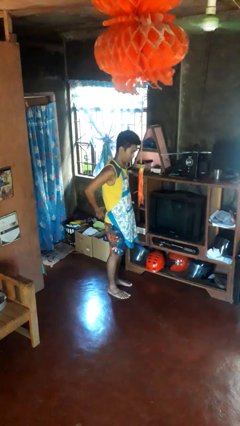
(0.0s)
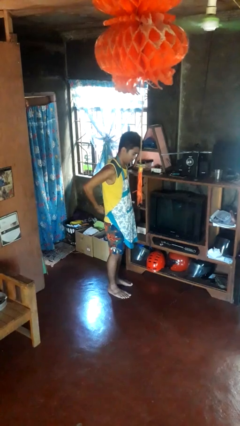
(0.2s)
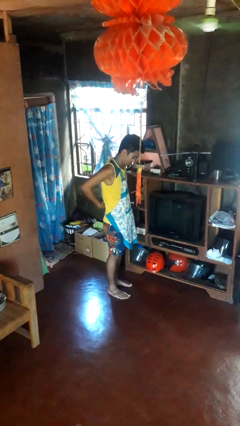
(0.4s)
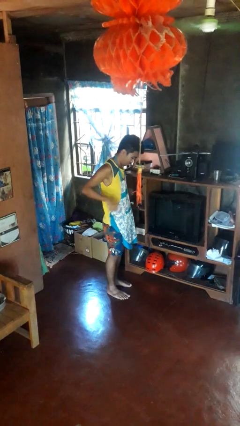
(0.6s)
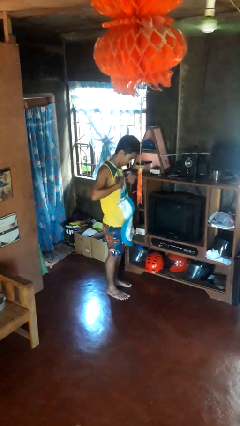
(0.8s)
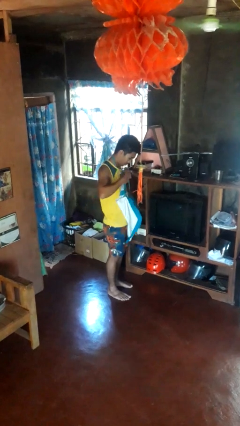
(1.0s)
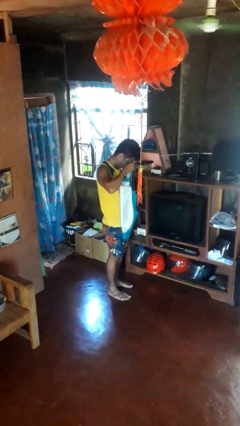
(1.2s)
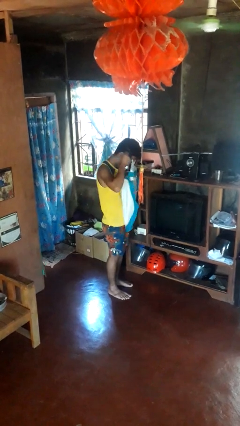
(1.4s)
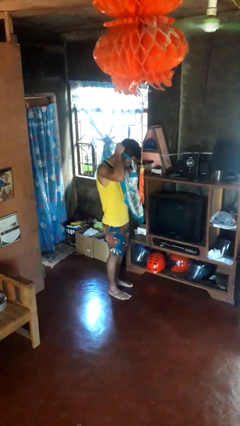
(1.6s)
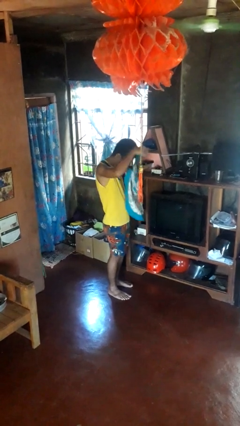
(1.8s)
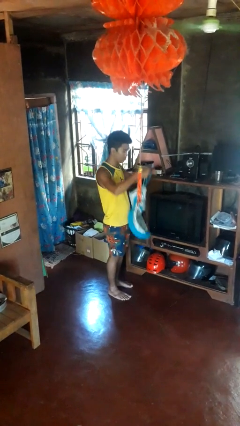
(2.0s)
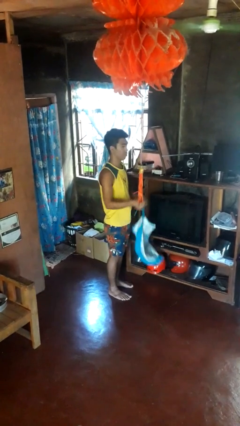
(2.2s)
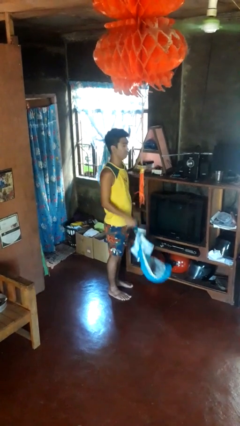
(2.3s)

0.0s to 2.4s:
person takes off apron

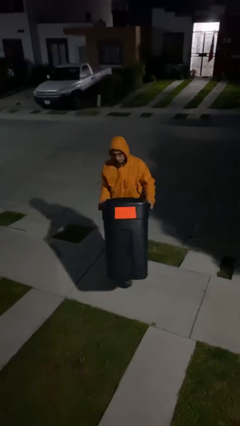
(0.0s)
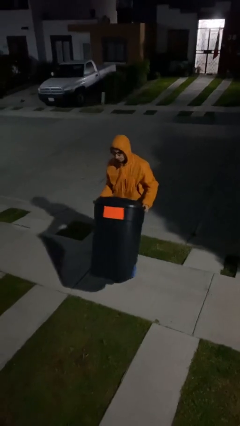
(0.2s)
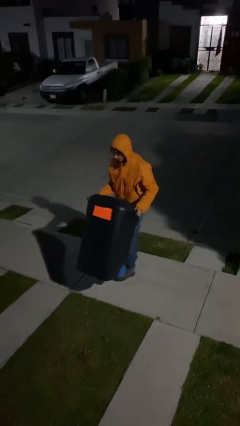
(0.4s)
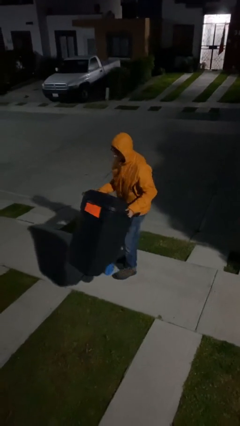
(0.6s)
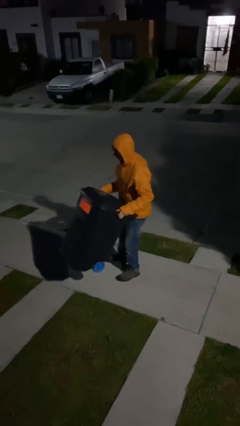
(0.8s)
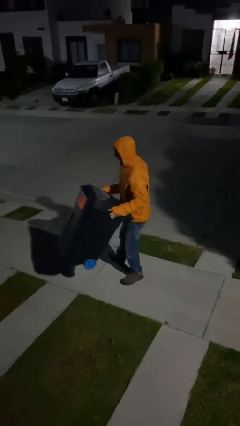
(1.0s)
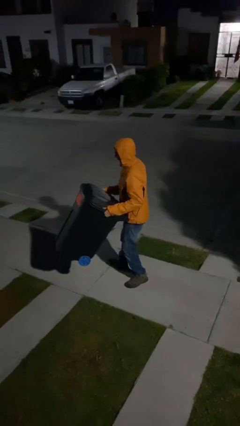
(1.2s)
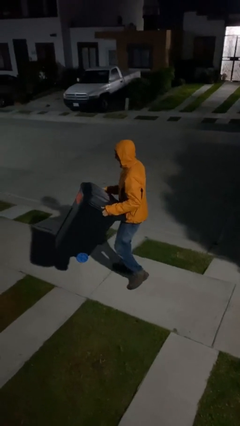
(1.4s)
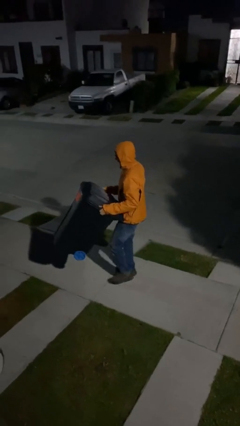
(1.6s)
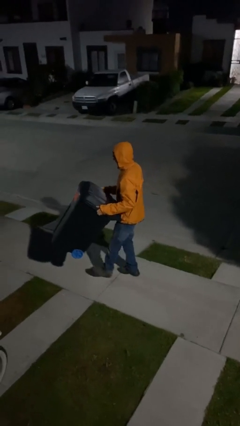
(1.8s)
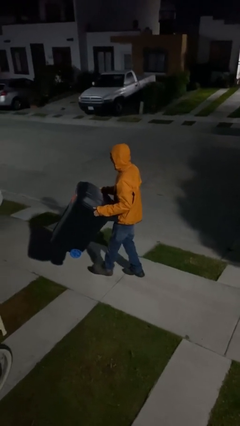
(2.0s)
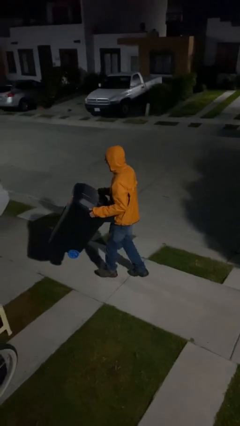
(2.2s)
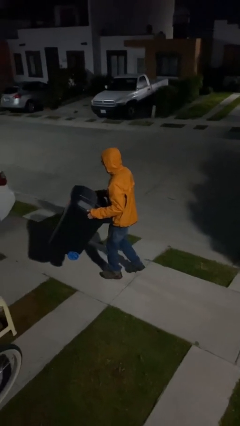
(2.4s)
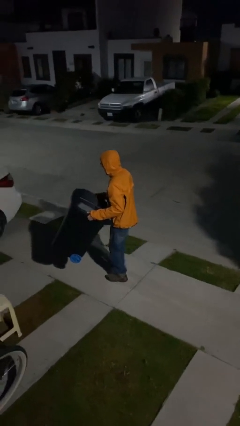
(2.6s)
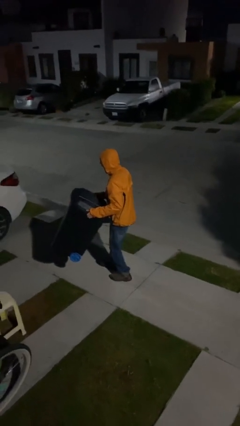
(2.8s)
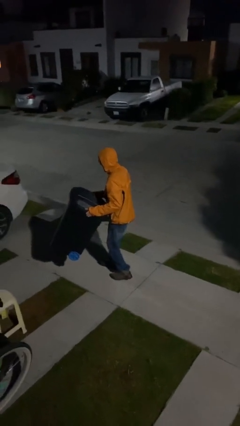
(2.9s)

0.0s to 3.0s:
person carries heavy object

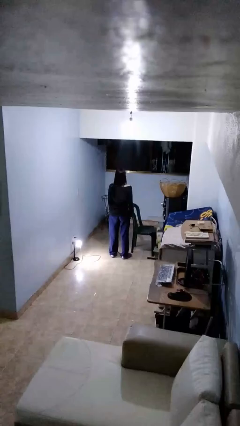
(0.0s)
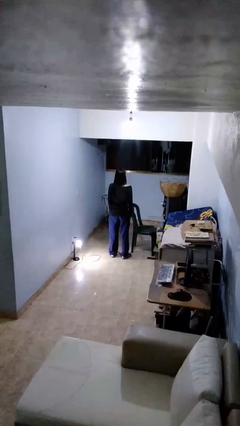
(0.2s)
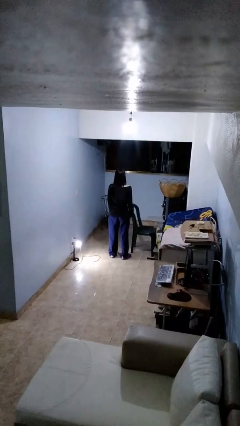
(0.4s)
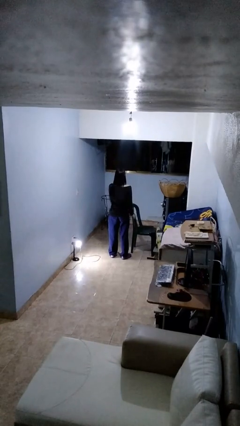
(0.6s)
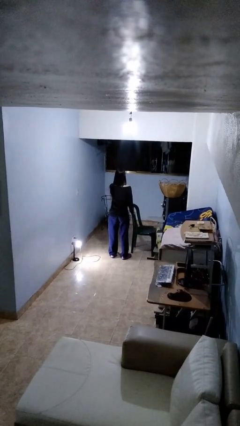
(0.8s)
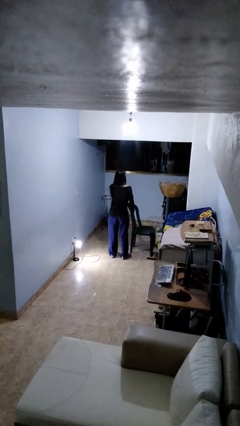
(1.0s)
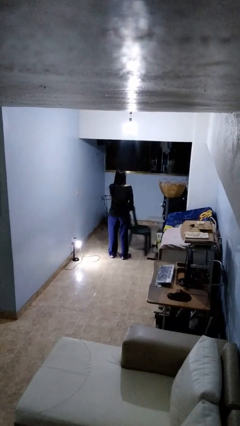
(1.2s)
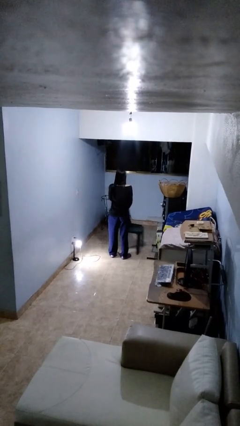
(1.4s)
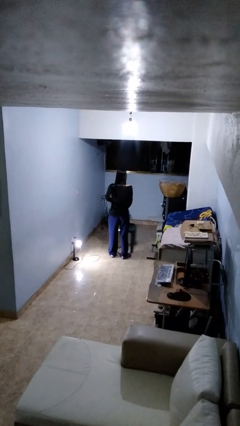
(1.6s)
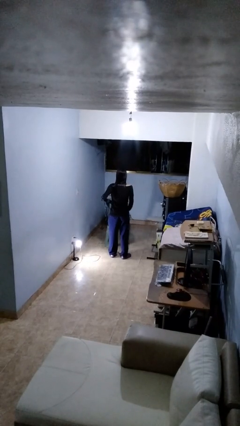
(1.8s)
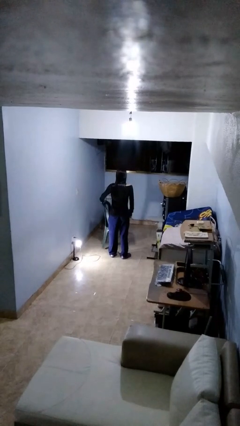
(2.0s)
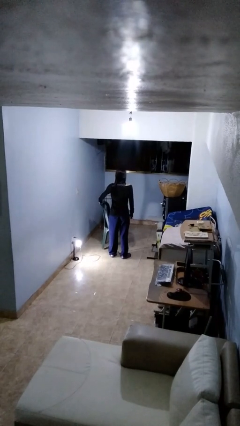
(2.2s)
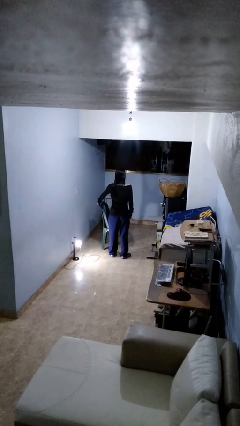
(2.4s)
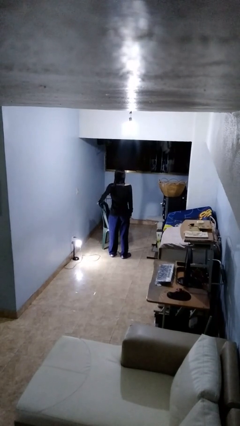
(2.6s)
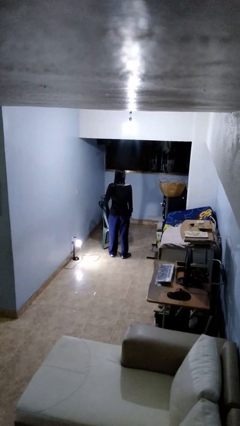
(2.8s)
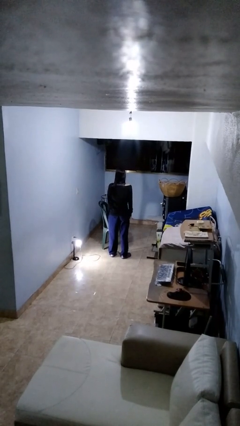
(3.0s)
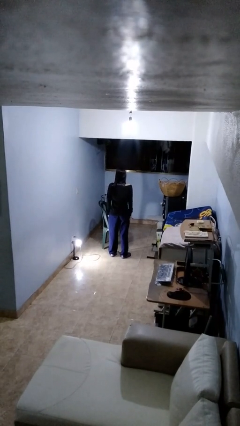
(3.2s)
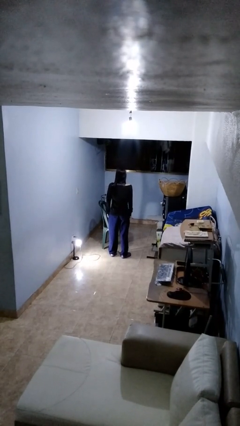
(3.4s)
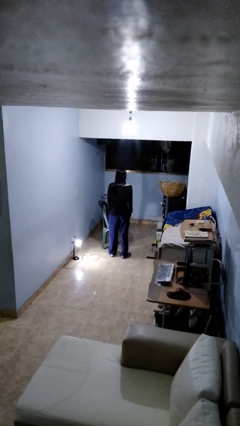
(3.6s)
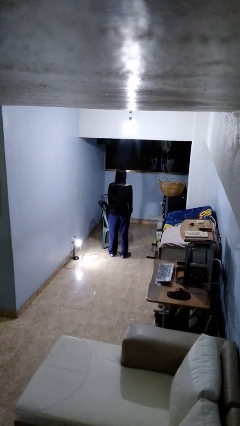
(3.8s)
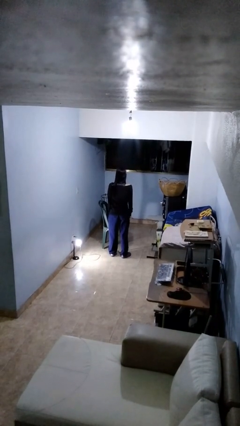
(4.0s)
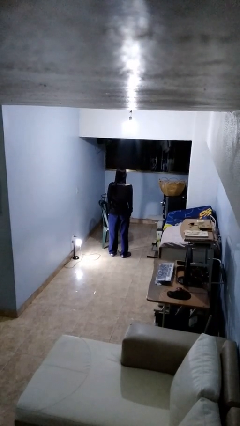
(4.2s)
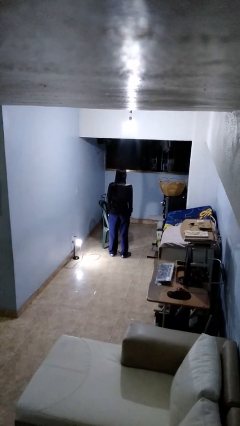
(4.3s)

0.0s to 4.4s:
person pulls out chair

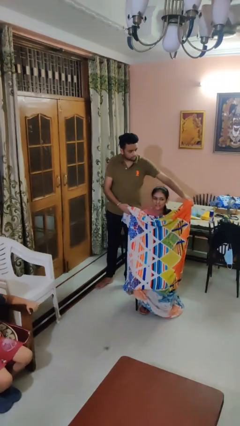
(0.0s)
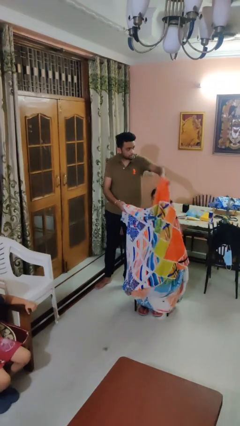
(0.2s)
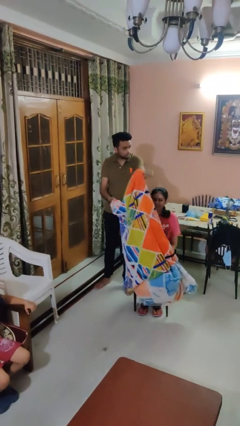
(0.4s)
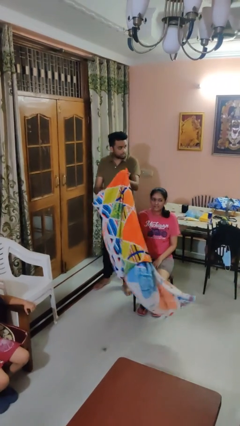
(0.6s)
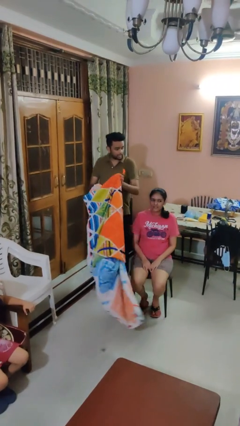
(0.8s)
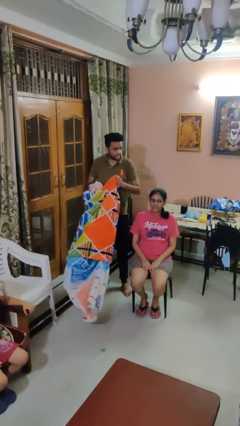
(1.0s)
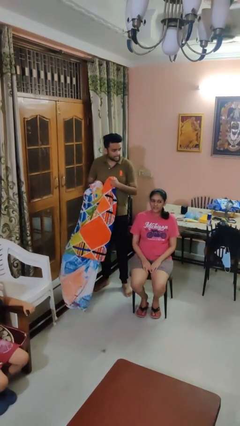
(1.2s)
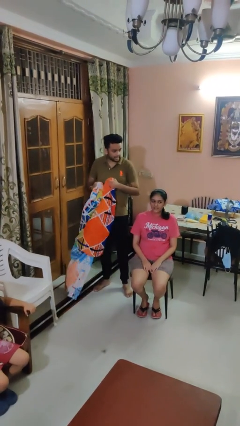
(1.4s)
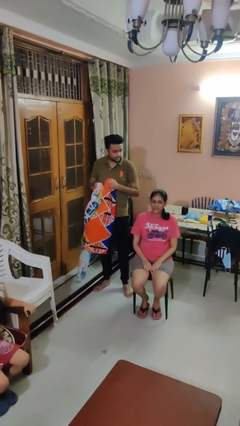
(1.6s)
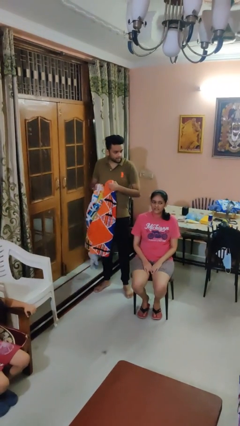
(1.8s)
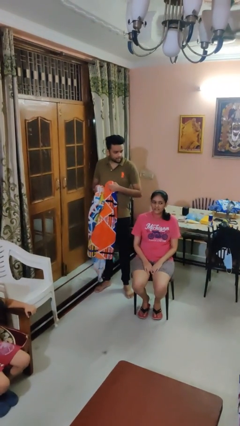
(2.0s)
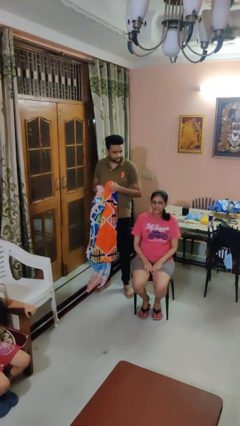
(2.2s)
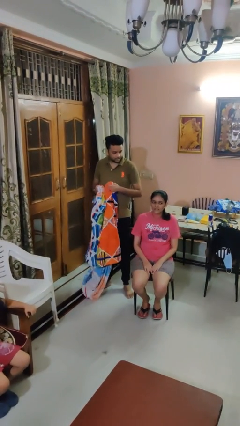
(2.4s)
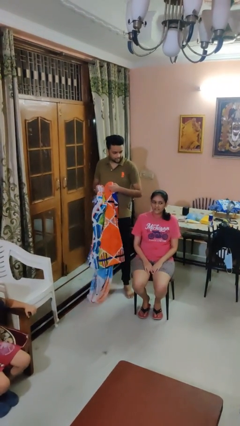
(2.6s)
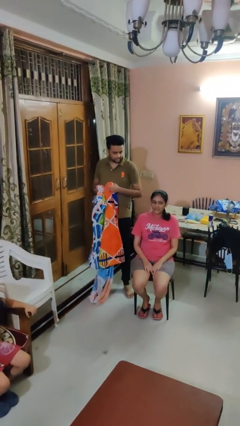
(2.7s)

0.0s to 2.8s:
person uncovers friend with blanket

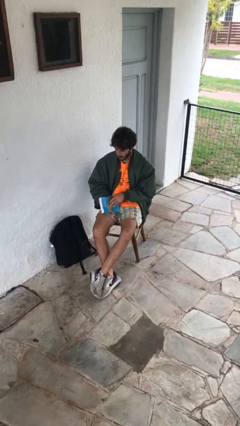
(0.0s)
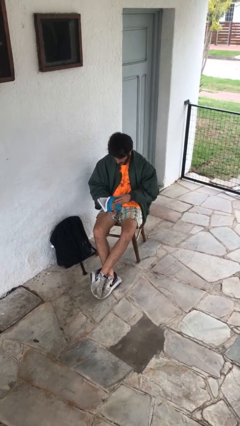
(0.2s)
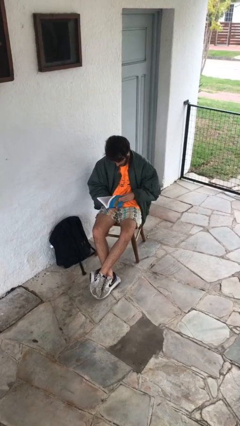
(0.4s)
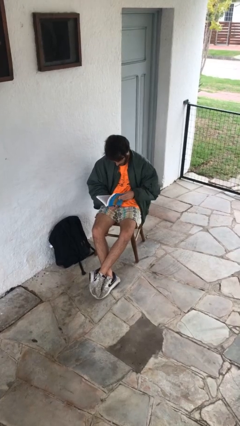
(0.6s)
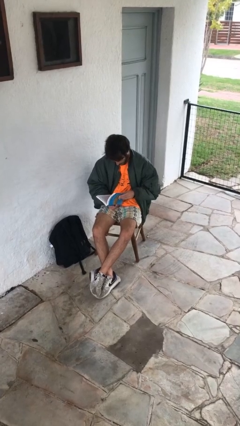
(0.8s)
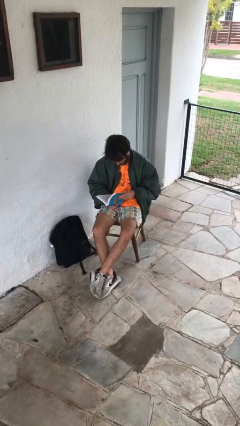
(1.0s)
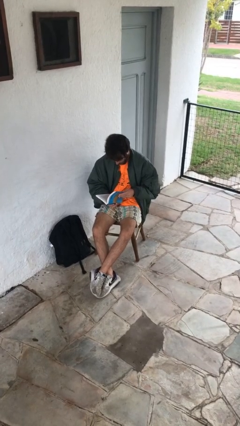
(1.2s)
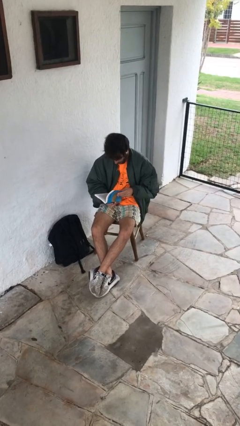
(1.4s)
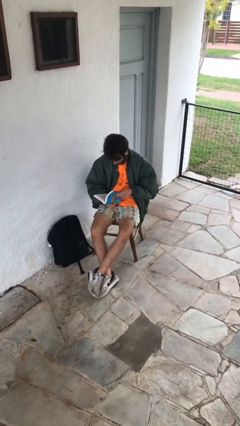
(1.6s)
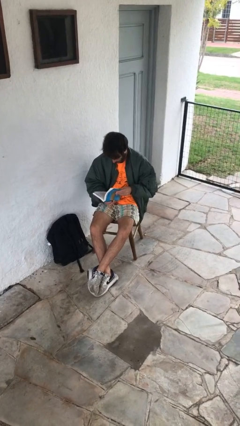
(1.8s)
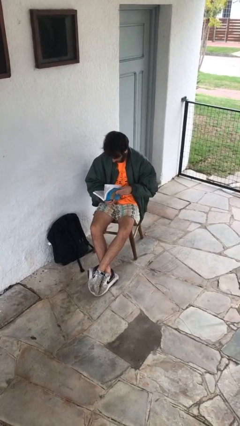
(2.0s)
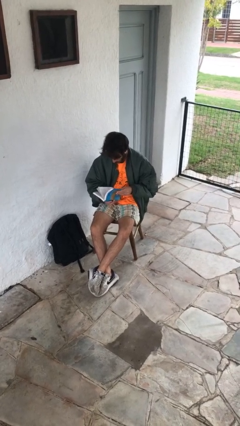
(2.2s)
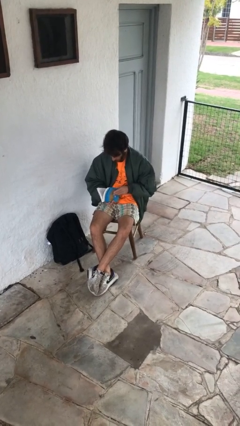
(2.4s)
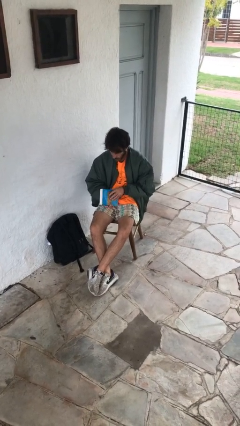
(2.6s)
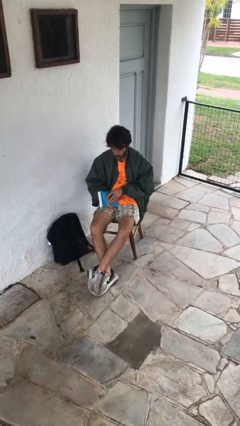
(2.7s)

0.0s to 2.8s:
person reads document

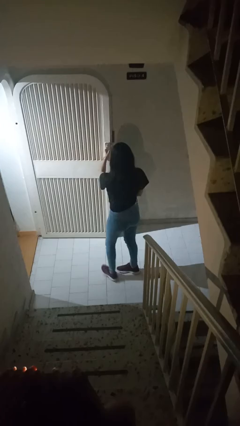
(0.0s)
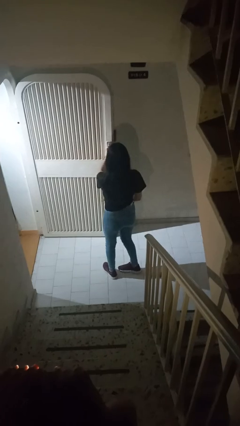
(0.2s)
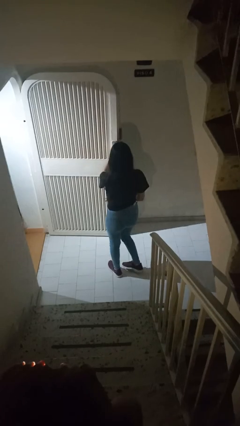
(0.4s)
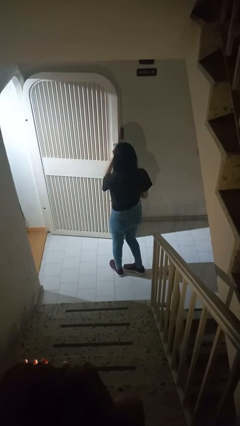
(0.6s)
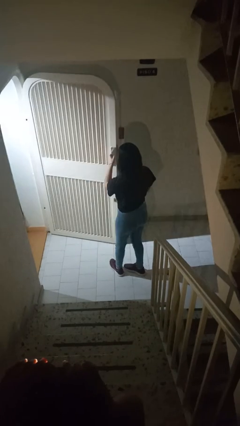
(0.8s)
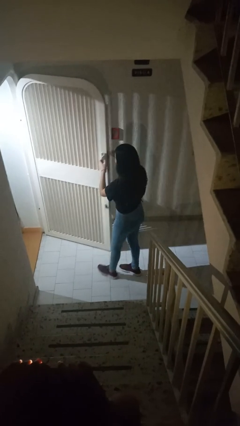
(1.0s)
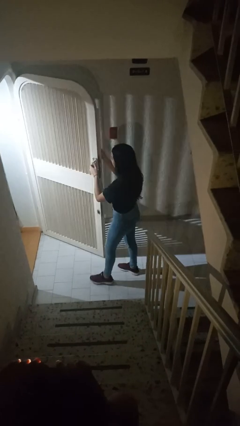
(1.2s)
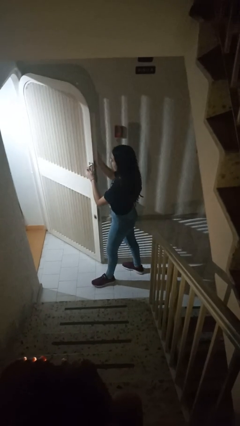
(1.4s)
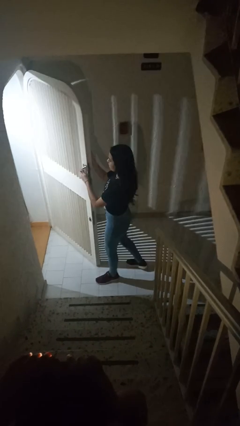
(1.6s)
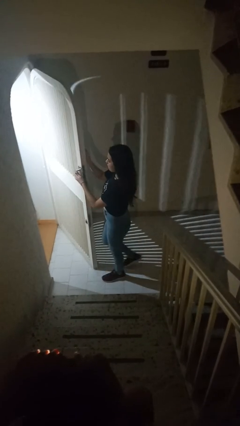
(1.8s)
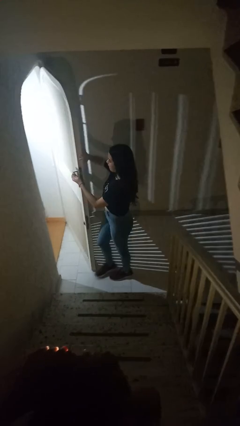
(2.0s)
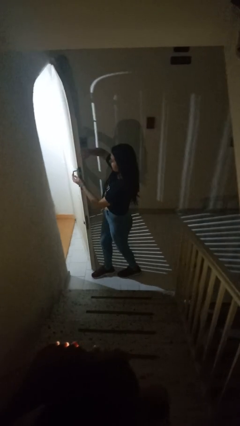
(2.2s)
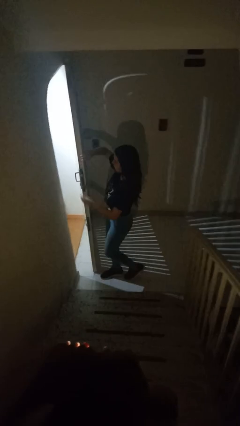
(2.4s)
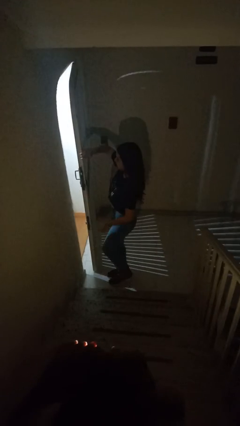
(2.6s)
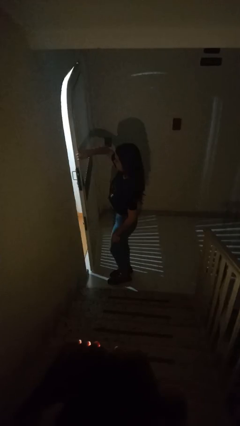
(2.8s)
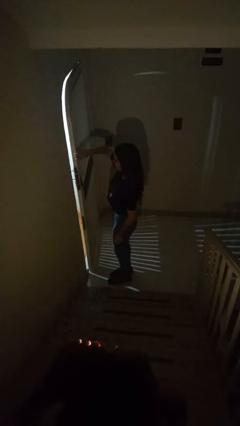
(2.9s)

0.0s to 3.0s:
person closes facility door
